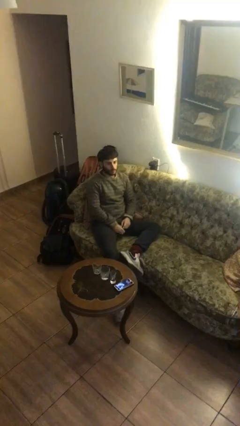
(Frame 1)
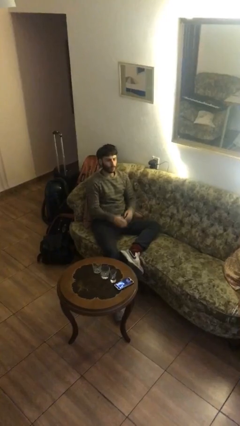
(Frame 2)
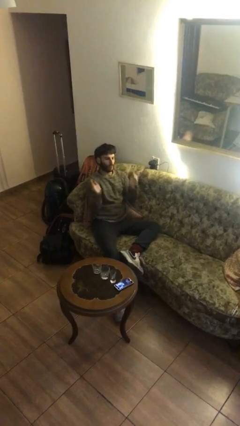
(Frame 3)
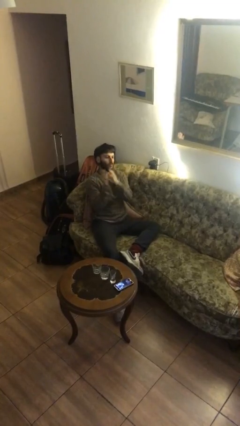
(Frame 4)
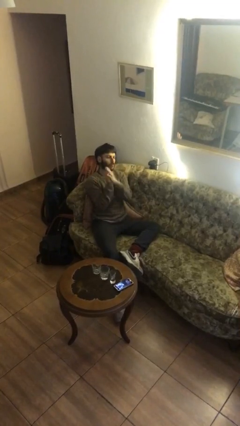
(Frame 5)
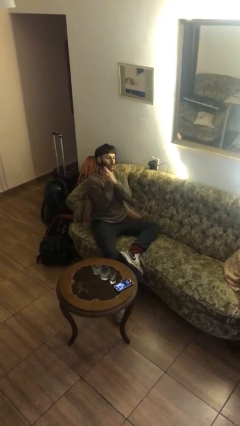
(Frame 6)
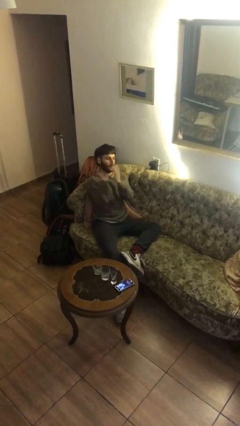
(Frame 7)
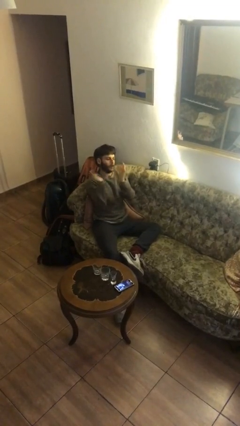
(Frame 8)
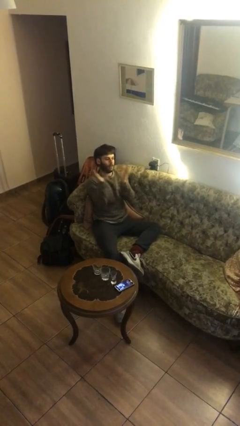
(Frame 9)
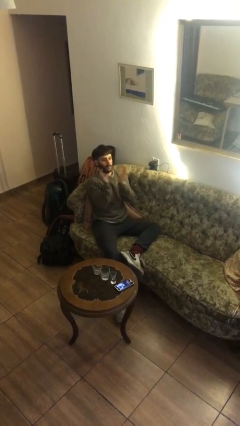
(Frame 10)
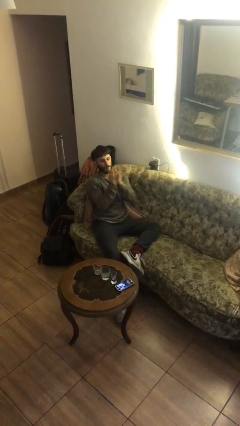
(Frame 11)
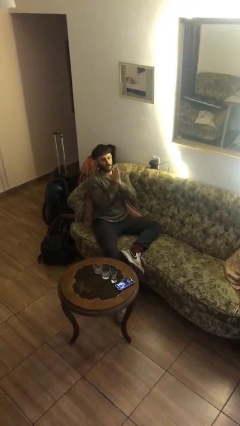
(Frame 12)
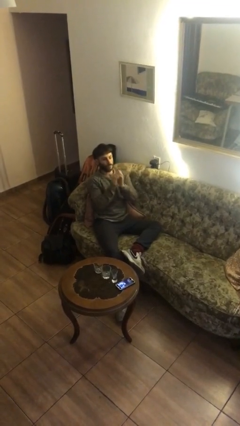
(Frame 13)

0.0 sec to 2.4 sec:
person claps hands

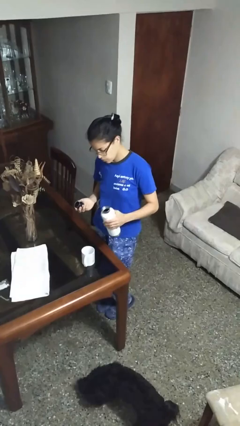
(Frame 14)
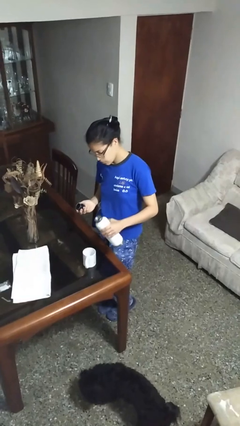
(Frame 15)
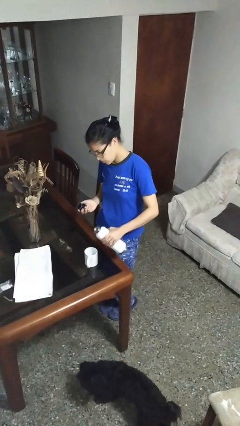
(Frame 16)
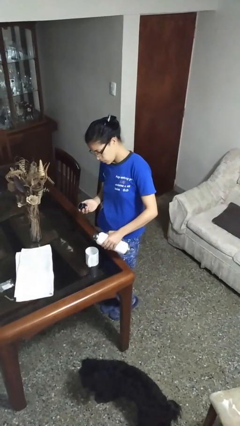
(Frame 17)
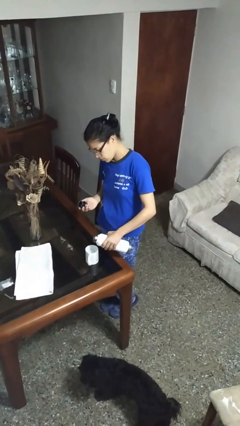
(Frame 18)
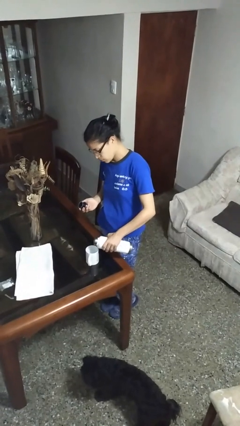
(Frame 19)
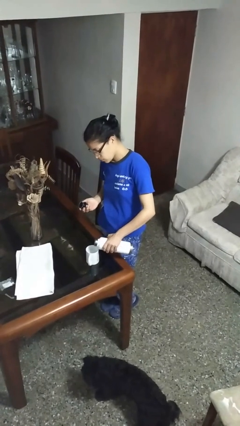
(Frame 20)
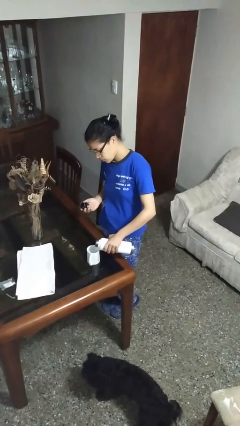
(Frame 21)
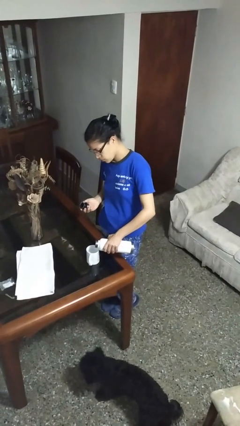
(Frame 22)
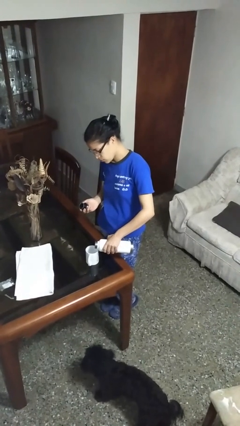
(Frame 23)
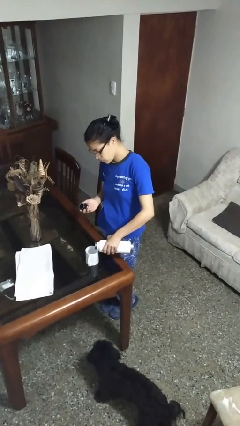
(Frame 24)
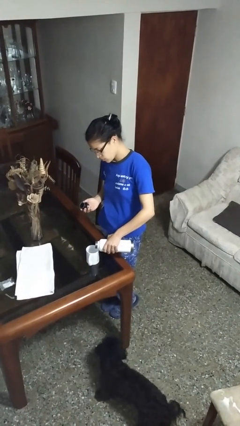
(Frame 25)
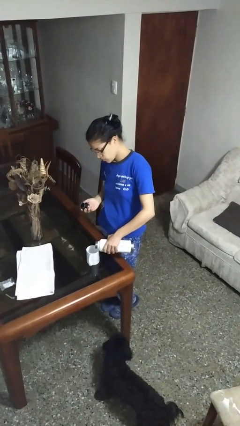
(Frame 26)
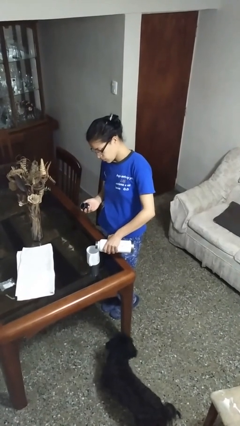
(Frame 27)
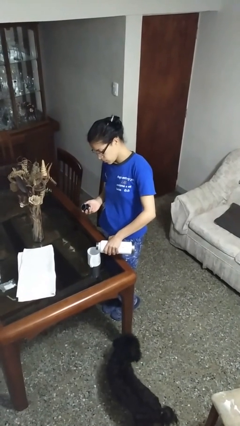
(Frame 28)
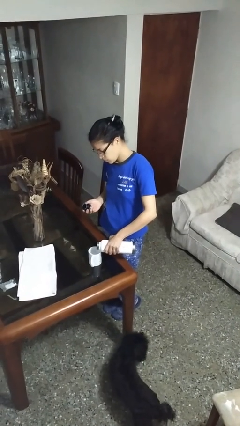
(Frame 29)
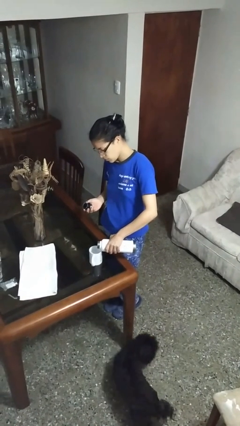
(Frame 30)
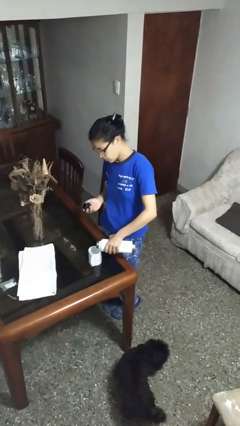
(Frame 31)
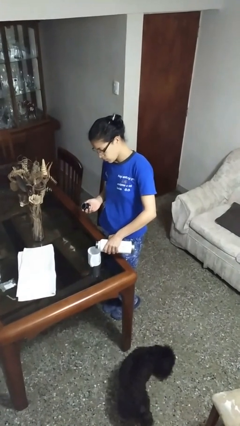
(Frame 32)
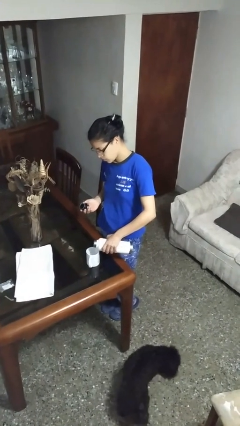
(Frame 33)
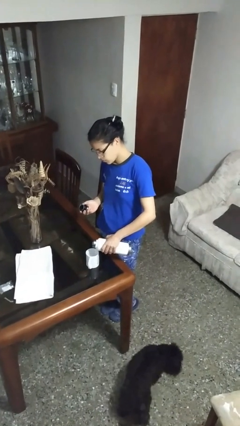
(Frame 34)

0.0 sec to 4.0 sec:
person pours liquid into cup

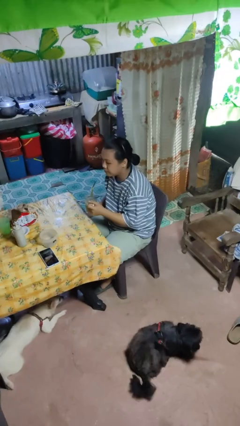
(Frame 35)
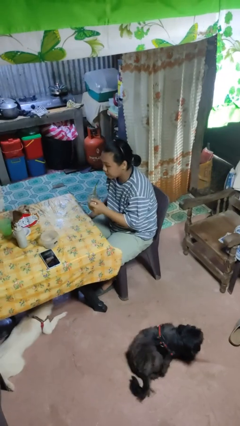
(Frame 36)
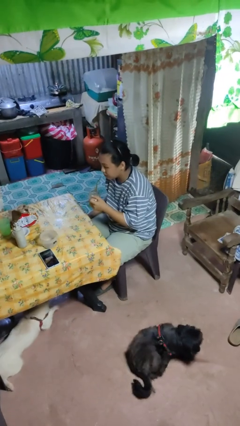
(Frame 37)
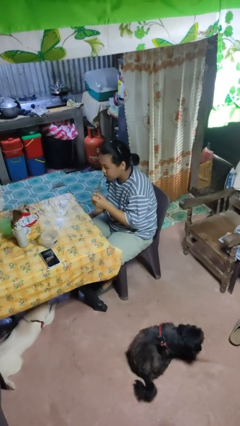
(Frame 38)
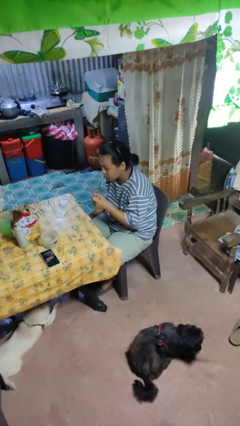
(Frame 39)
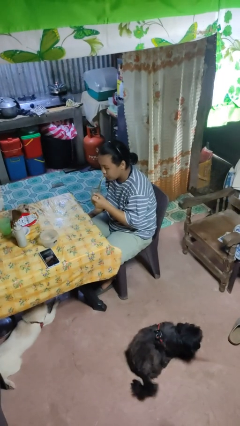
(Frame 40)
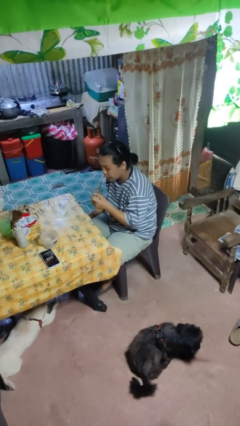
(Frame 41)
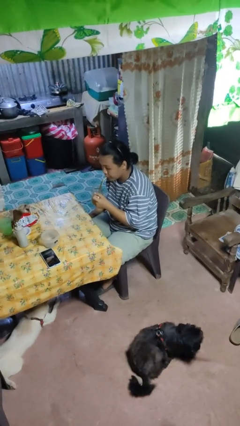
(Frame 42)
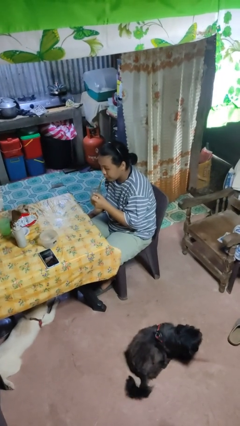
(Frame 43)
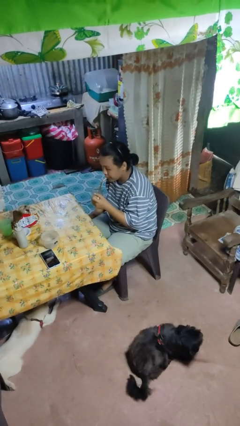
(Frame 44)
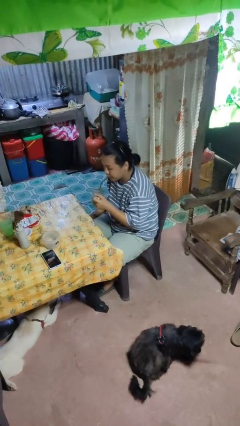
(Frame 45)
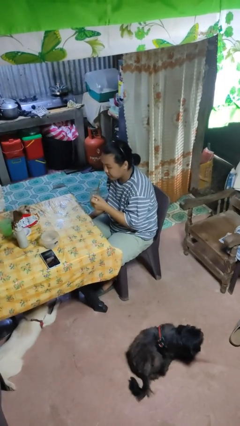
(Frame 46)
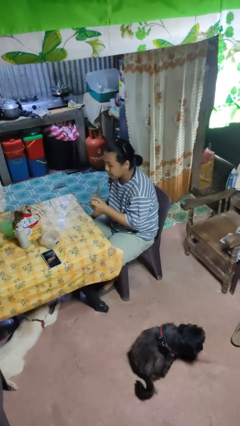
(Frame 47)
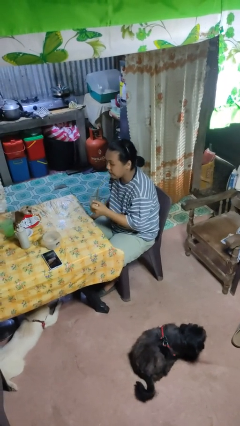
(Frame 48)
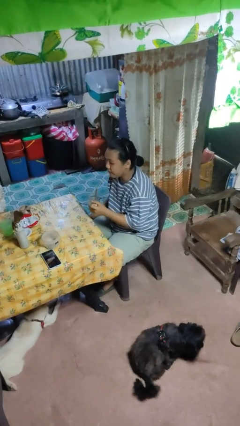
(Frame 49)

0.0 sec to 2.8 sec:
person drinks from straw

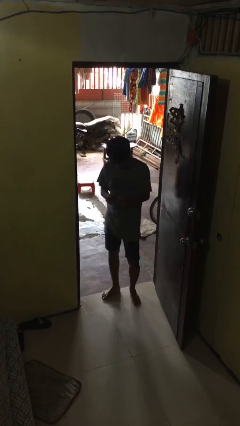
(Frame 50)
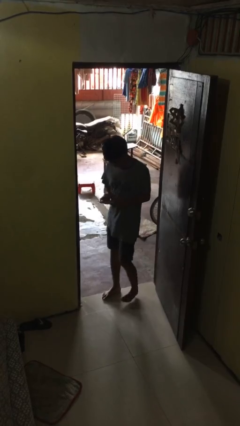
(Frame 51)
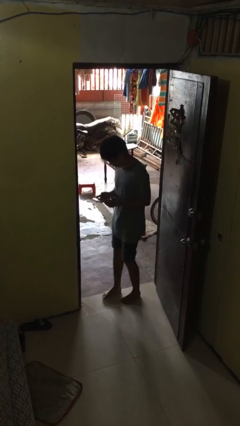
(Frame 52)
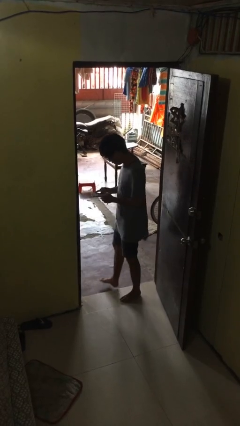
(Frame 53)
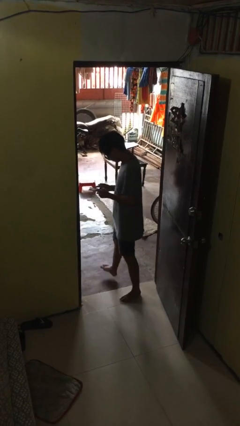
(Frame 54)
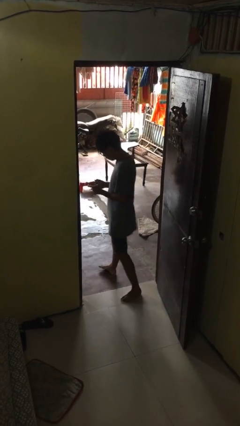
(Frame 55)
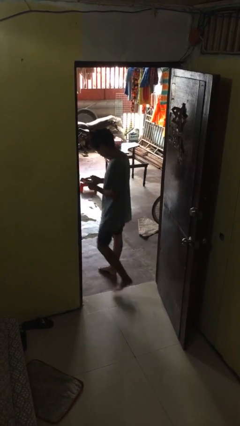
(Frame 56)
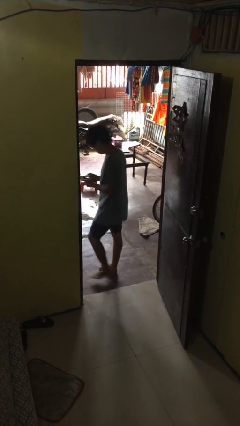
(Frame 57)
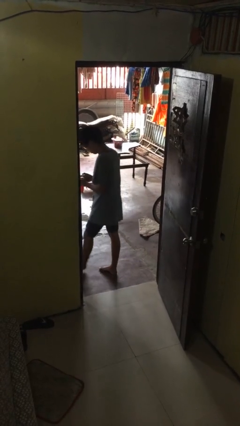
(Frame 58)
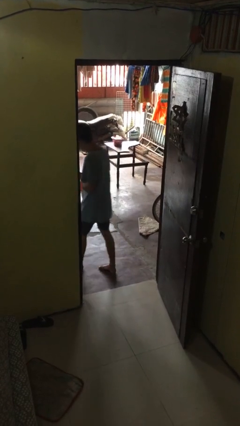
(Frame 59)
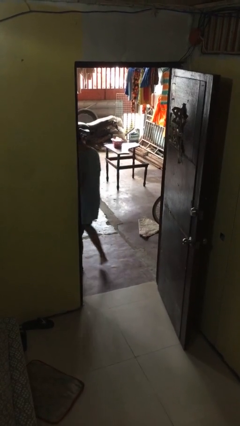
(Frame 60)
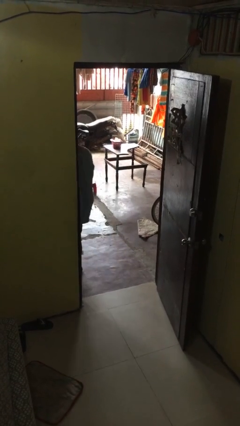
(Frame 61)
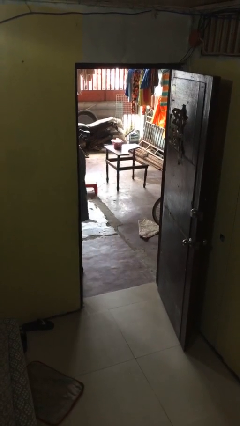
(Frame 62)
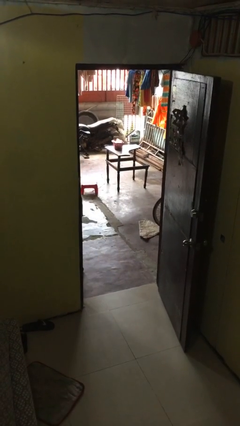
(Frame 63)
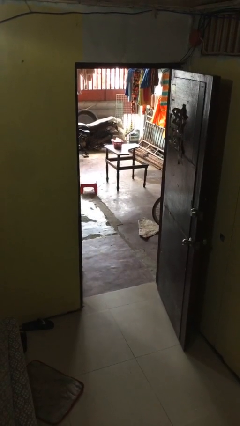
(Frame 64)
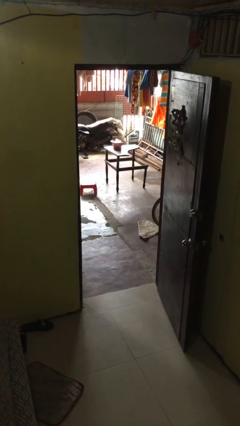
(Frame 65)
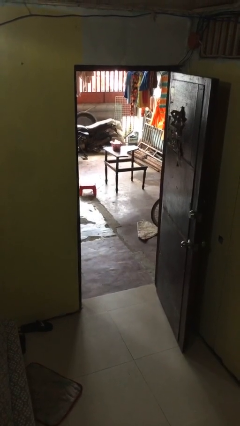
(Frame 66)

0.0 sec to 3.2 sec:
person exits scene through structure

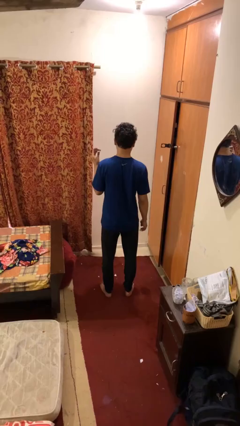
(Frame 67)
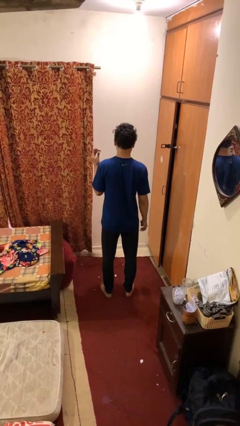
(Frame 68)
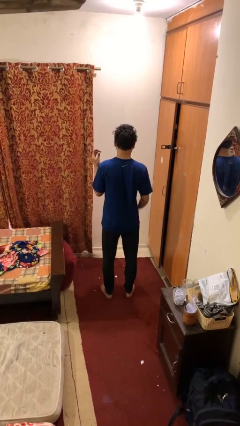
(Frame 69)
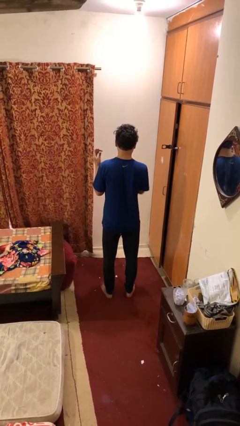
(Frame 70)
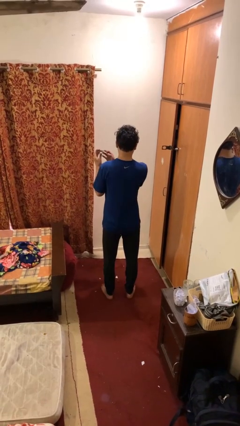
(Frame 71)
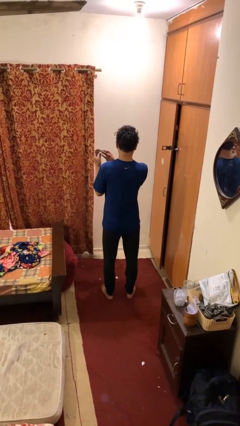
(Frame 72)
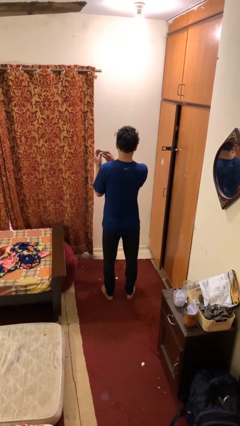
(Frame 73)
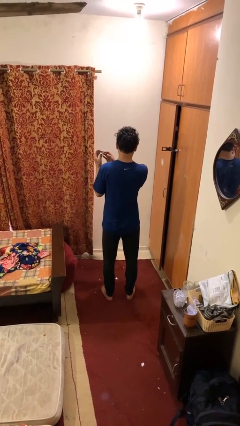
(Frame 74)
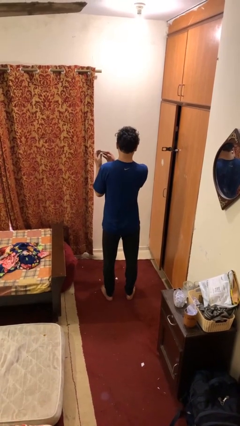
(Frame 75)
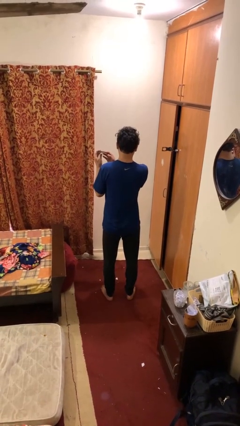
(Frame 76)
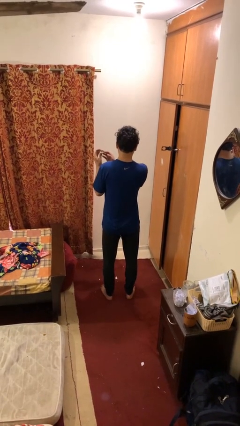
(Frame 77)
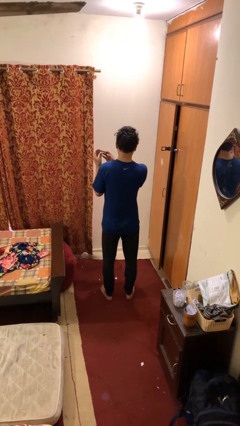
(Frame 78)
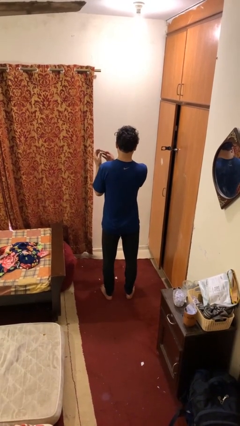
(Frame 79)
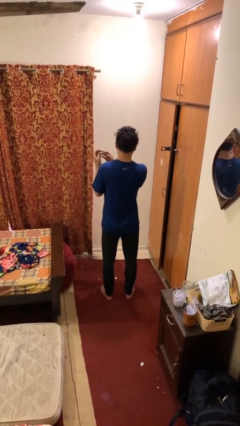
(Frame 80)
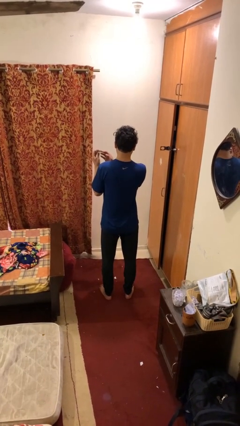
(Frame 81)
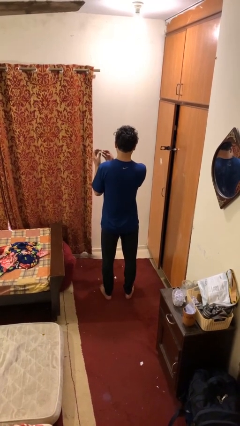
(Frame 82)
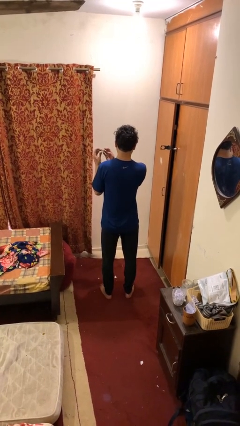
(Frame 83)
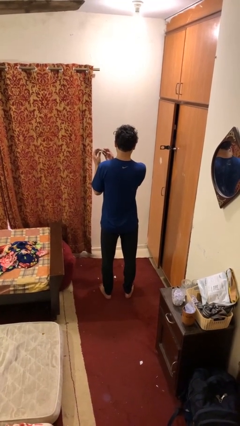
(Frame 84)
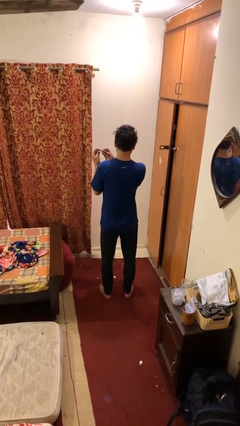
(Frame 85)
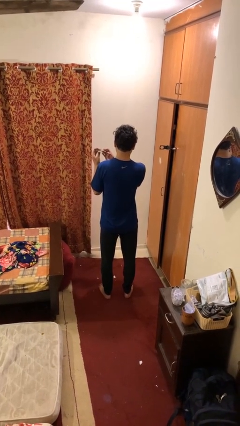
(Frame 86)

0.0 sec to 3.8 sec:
person clips fingernails

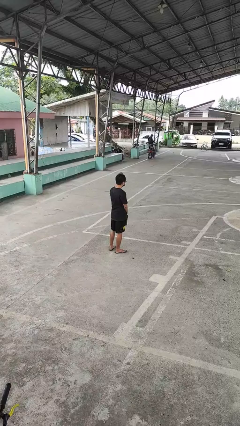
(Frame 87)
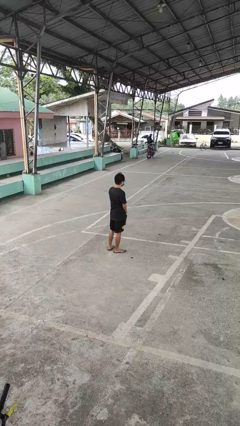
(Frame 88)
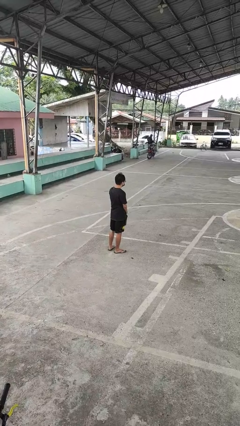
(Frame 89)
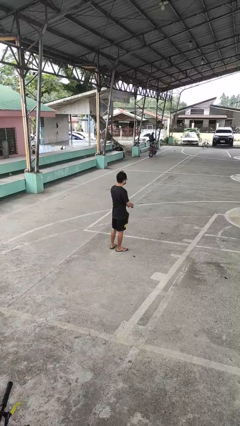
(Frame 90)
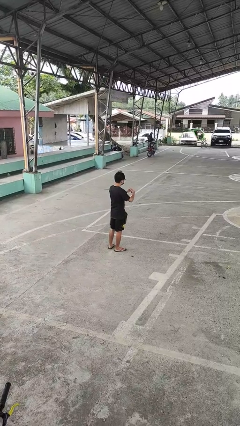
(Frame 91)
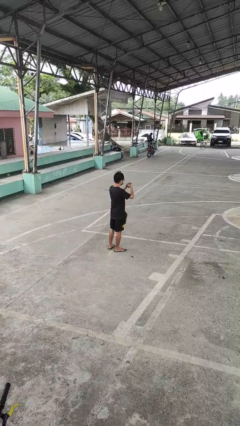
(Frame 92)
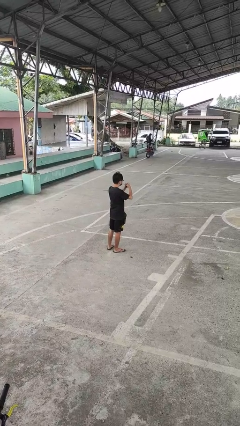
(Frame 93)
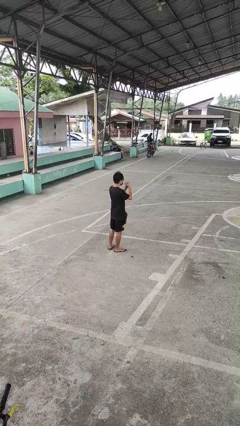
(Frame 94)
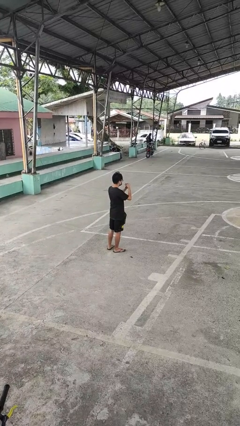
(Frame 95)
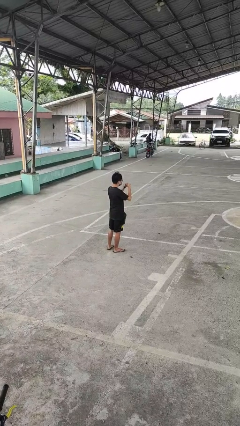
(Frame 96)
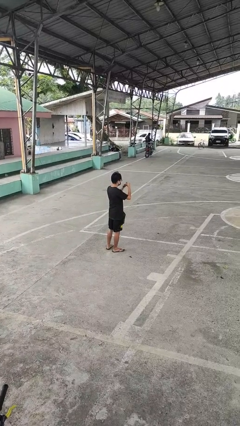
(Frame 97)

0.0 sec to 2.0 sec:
person cracks knuckles
